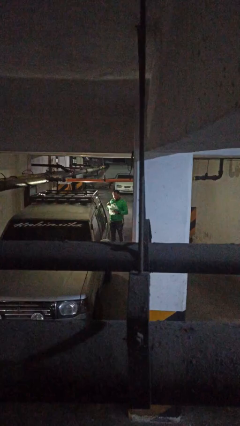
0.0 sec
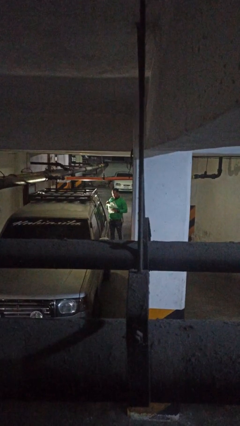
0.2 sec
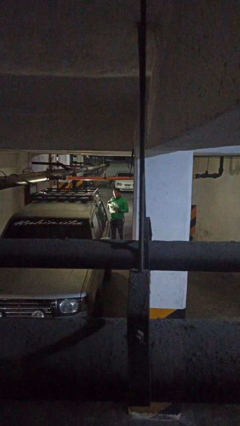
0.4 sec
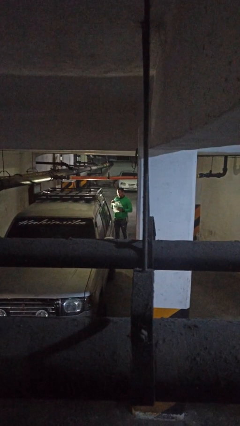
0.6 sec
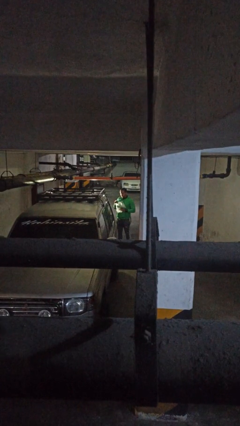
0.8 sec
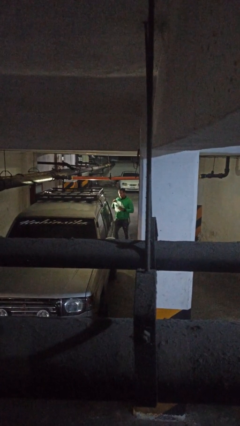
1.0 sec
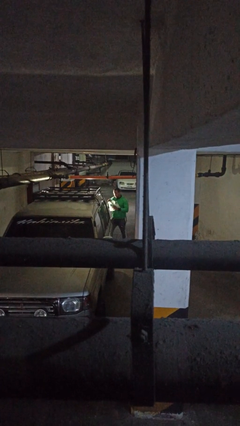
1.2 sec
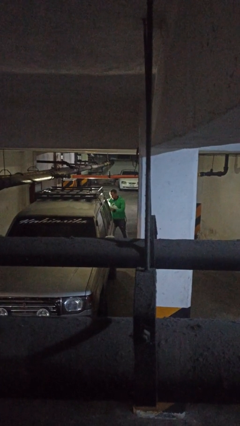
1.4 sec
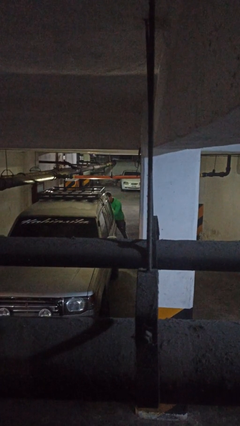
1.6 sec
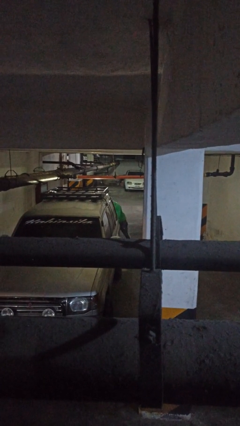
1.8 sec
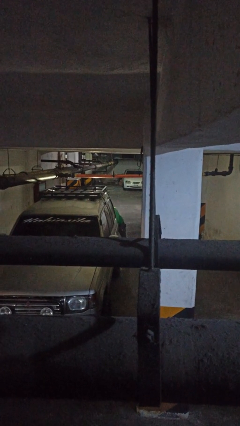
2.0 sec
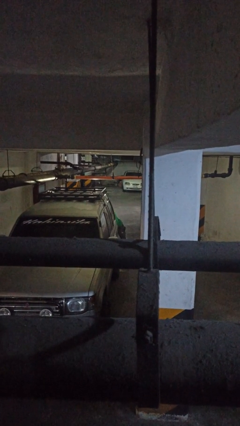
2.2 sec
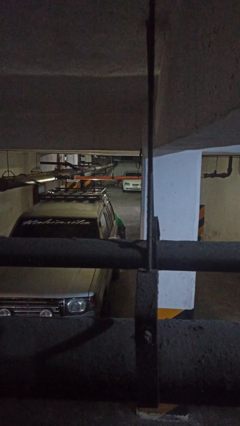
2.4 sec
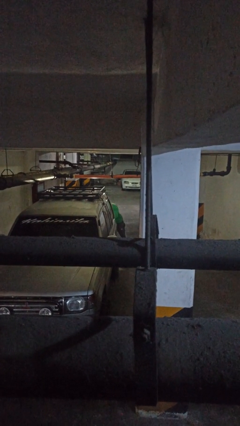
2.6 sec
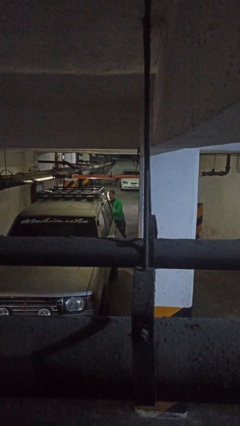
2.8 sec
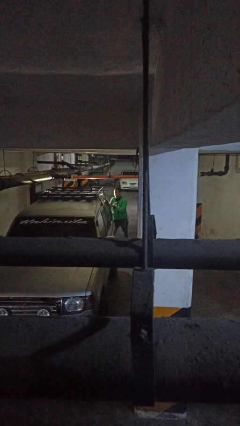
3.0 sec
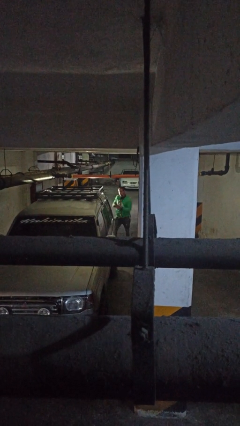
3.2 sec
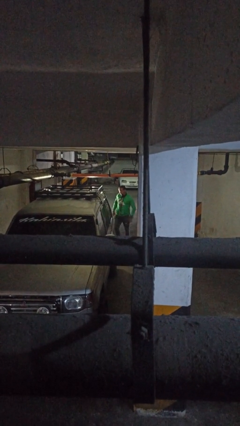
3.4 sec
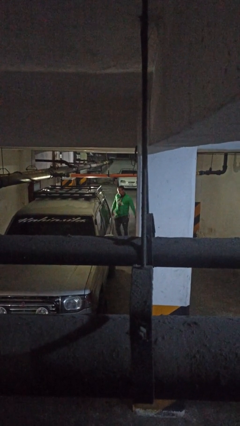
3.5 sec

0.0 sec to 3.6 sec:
person loads car

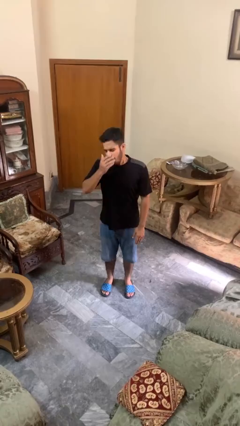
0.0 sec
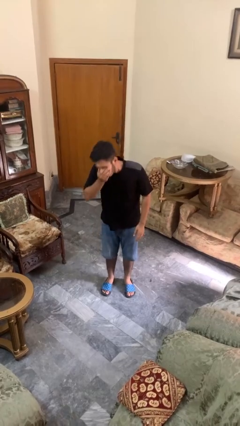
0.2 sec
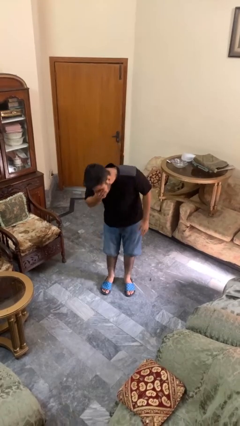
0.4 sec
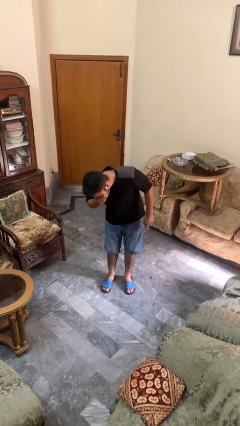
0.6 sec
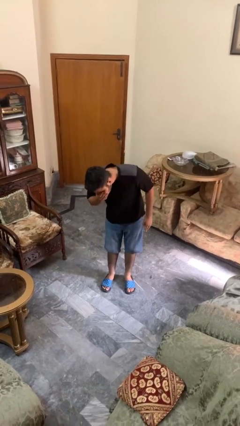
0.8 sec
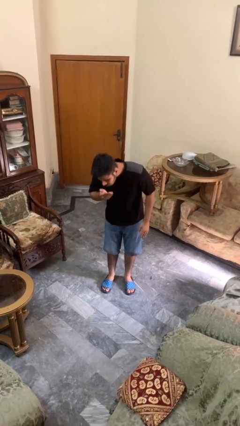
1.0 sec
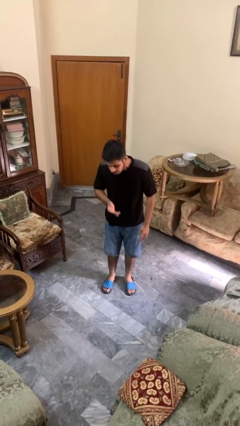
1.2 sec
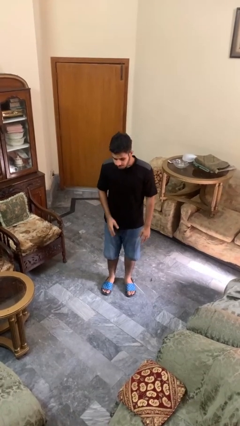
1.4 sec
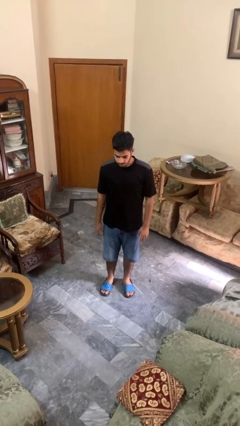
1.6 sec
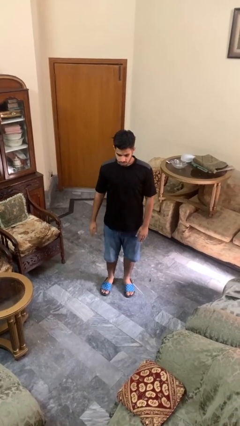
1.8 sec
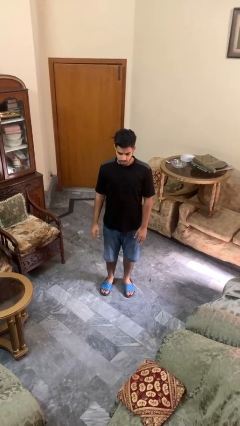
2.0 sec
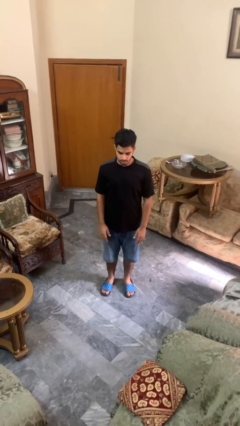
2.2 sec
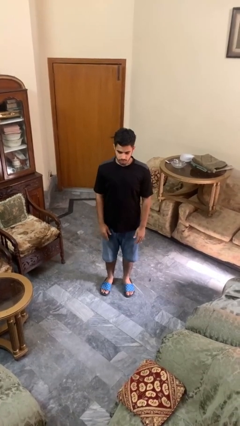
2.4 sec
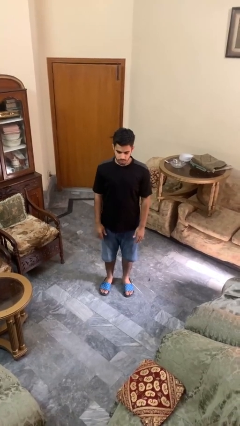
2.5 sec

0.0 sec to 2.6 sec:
person sneezes into hand

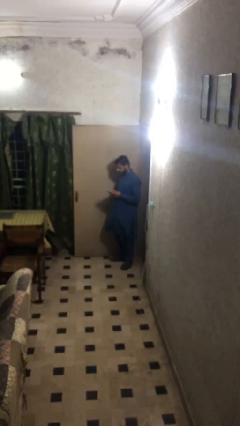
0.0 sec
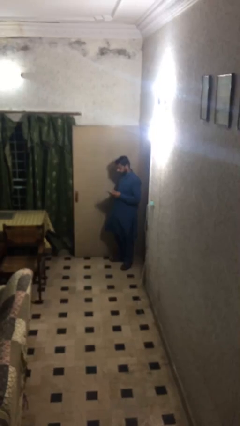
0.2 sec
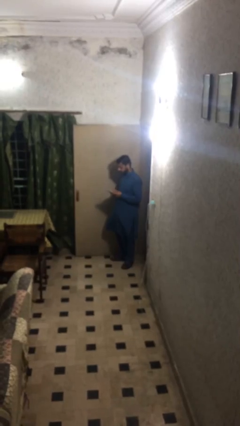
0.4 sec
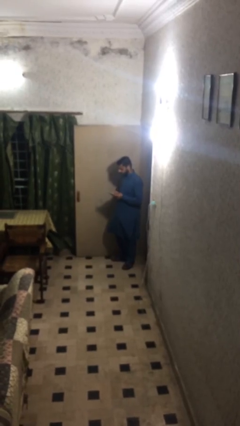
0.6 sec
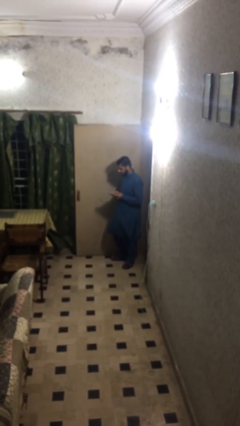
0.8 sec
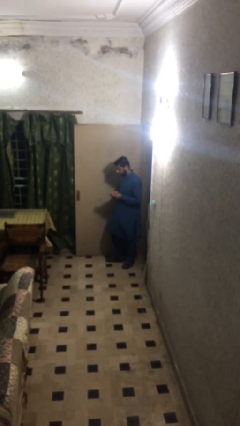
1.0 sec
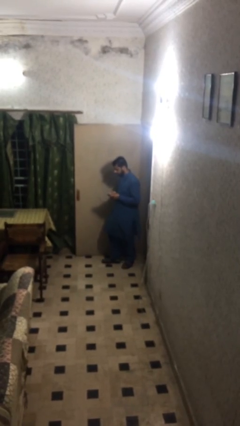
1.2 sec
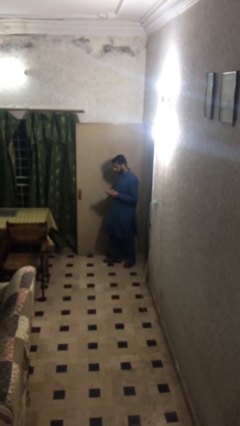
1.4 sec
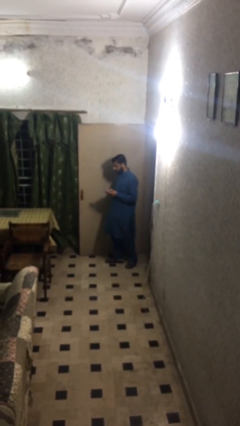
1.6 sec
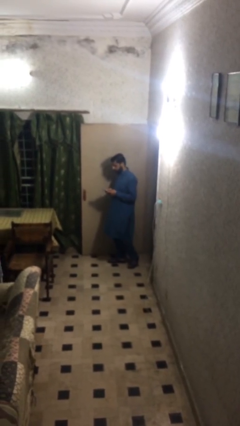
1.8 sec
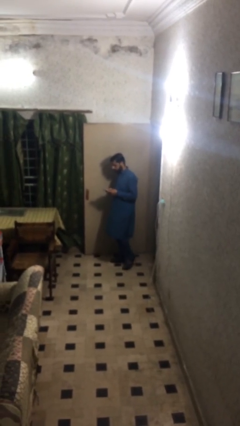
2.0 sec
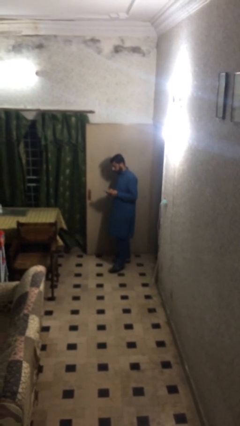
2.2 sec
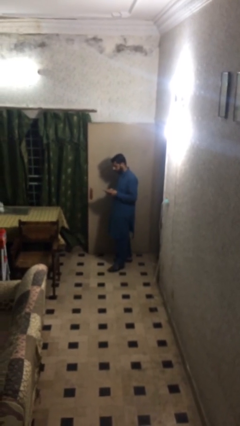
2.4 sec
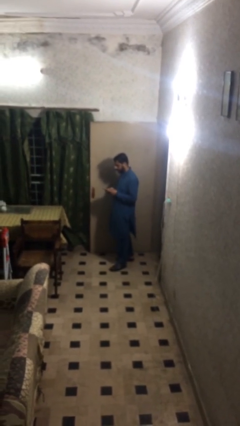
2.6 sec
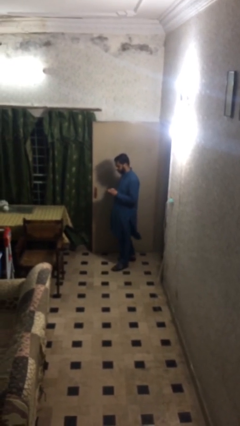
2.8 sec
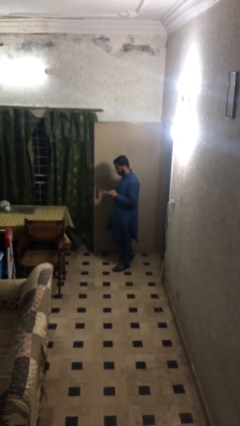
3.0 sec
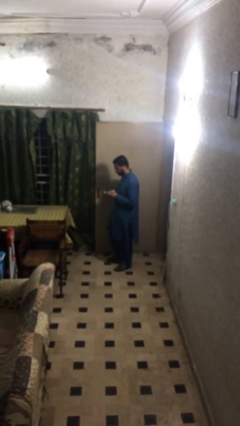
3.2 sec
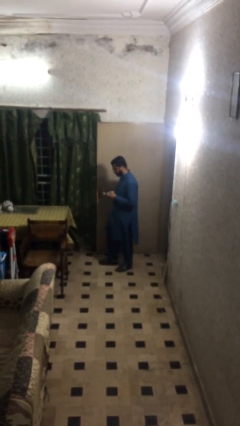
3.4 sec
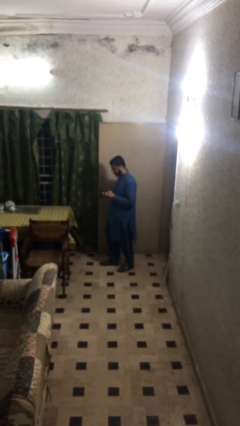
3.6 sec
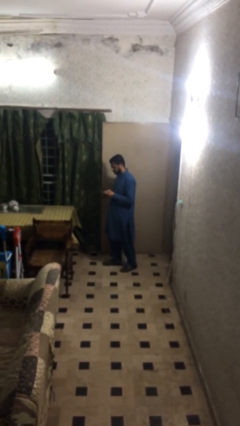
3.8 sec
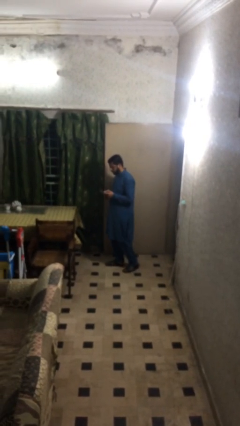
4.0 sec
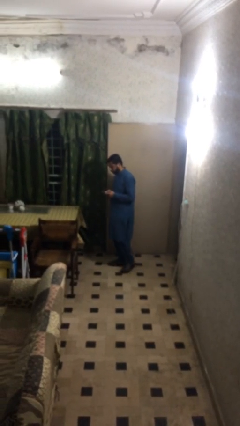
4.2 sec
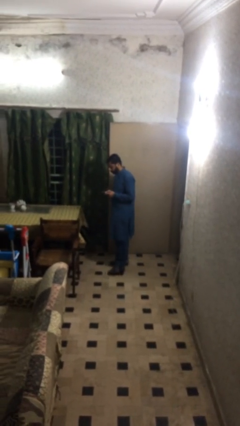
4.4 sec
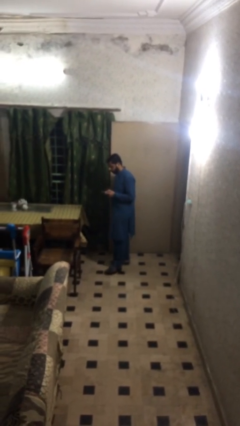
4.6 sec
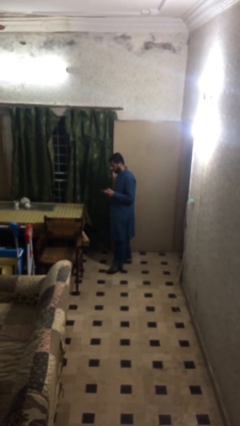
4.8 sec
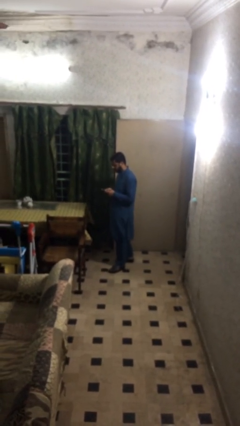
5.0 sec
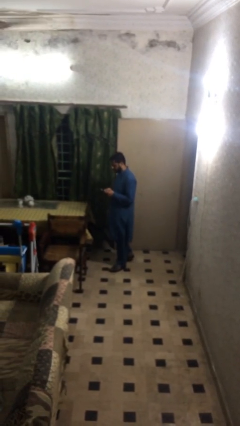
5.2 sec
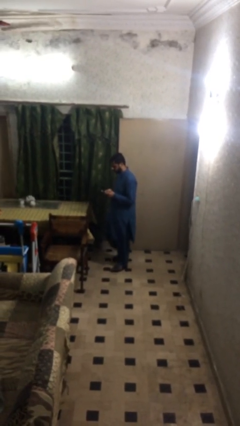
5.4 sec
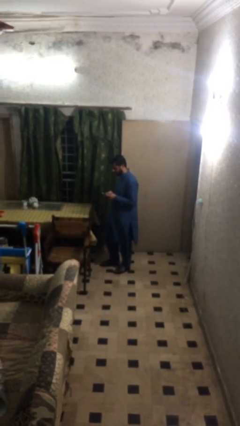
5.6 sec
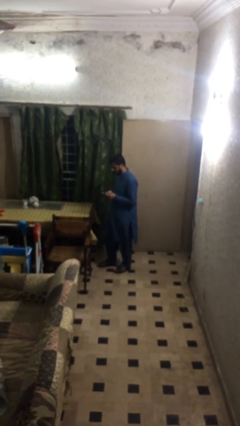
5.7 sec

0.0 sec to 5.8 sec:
person texts on phone

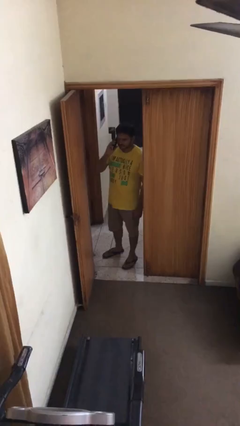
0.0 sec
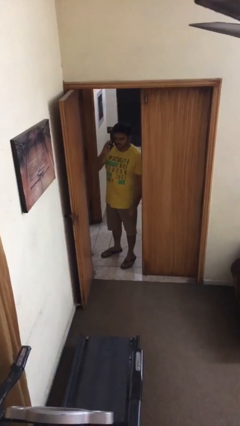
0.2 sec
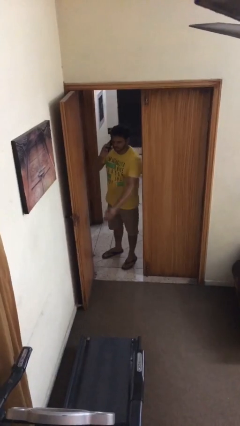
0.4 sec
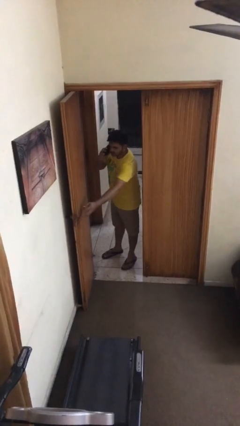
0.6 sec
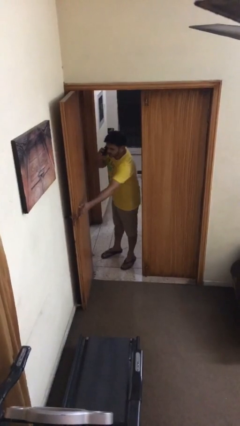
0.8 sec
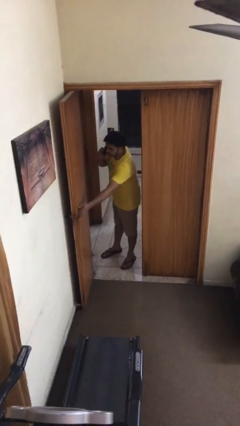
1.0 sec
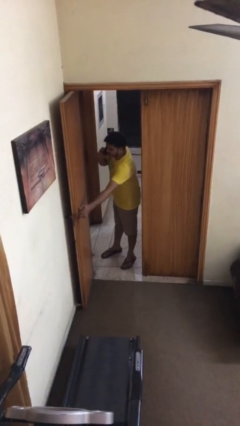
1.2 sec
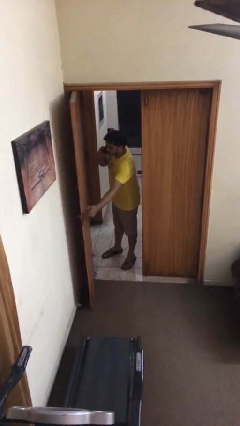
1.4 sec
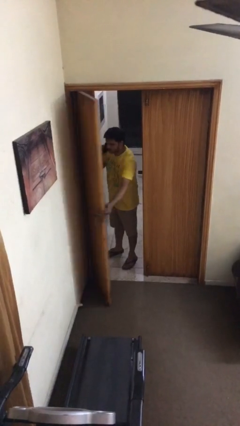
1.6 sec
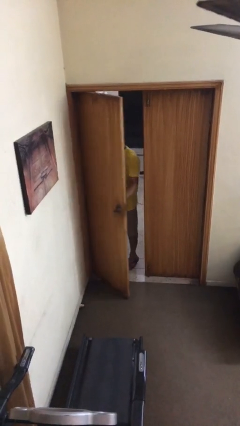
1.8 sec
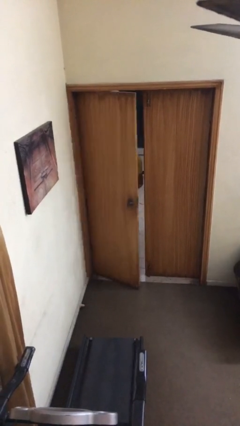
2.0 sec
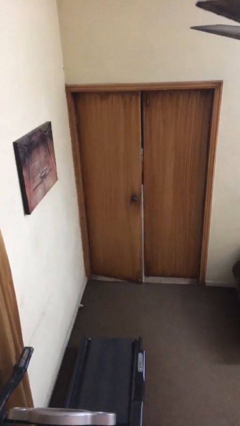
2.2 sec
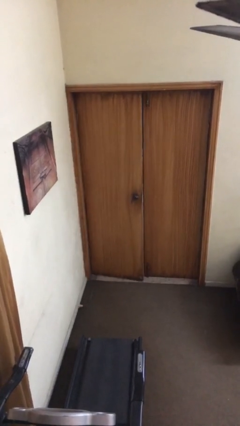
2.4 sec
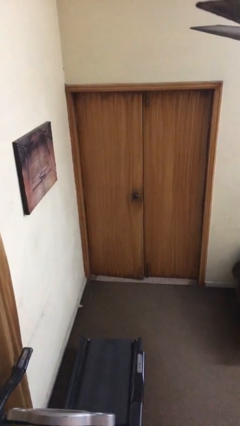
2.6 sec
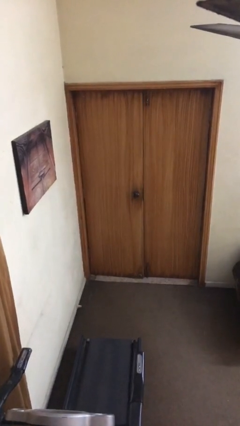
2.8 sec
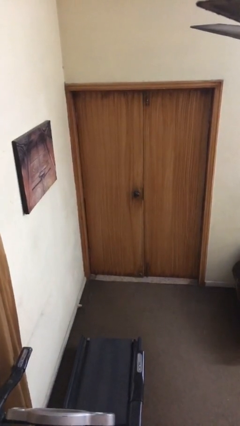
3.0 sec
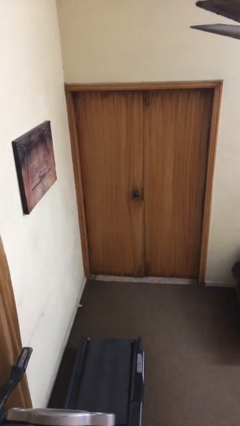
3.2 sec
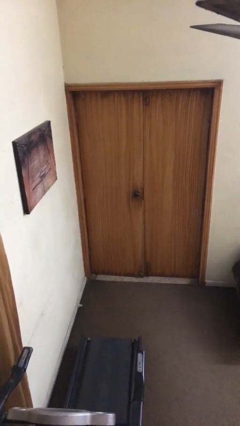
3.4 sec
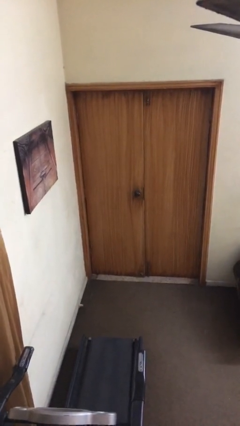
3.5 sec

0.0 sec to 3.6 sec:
person closes facility door

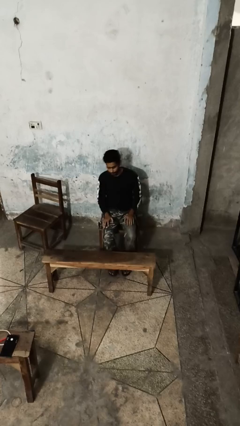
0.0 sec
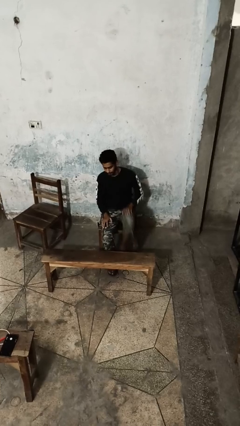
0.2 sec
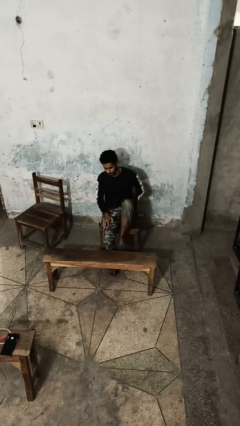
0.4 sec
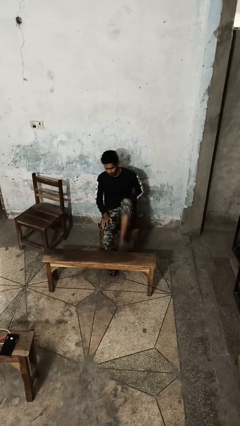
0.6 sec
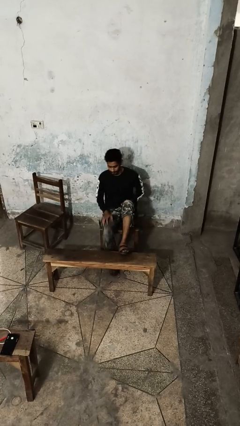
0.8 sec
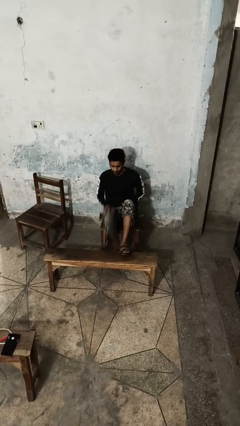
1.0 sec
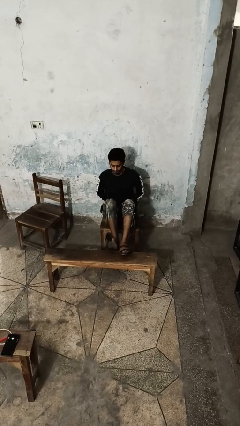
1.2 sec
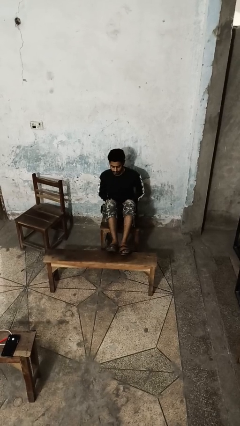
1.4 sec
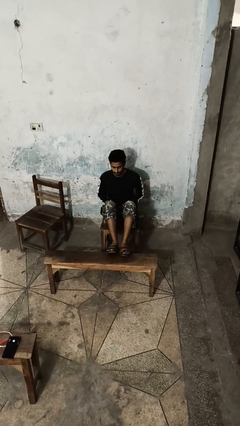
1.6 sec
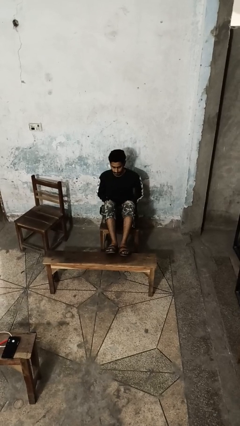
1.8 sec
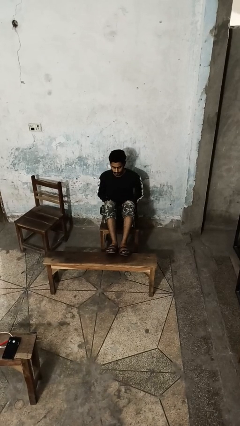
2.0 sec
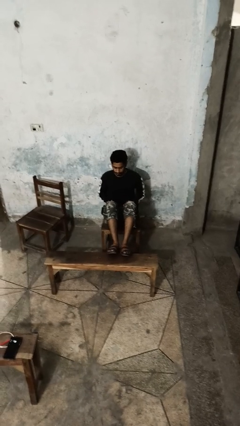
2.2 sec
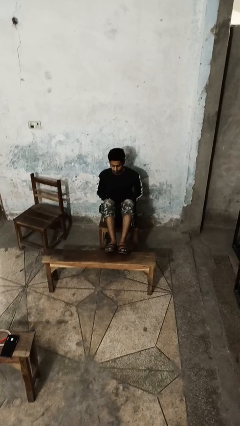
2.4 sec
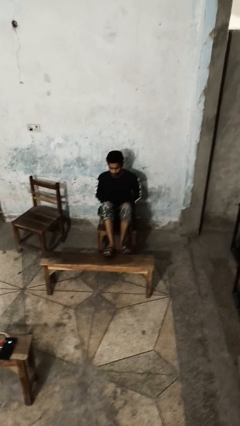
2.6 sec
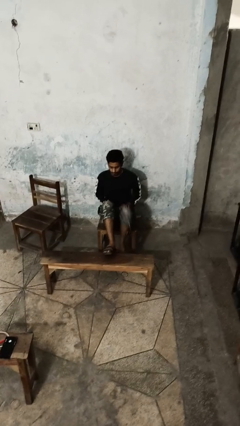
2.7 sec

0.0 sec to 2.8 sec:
person puts feet up
